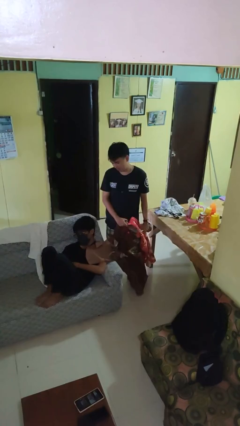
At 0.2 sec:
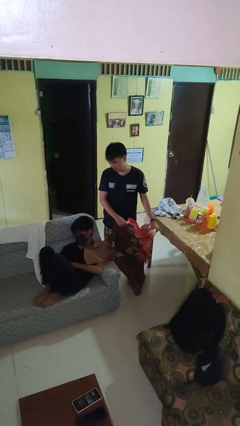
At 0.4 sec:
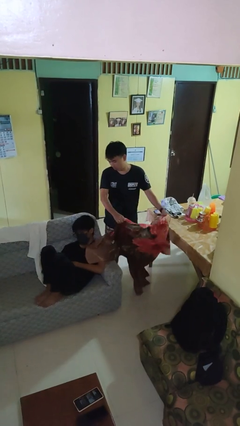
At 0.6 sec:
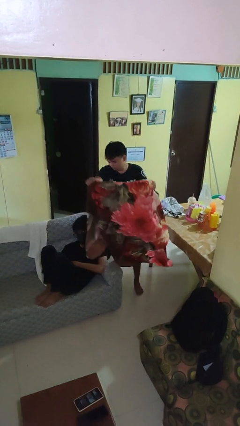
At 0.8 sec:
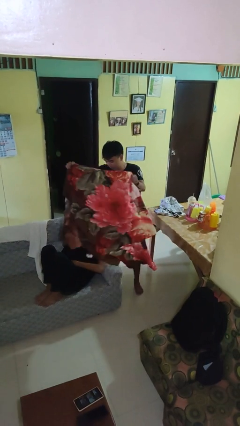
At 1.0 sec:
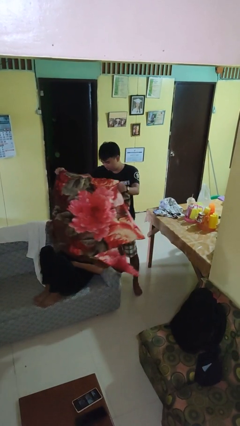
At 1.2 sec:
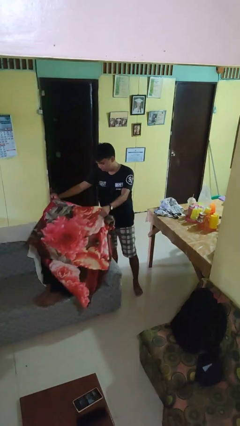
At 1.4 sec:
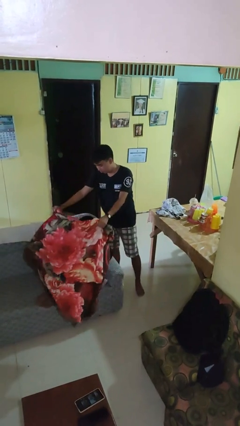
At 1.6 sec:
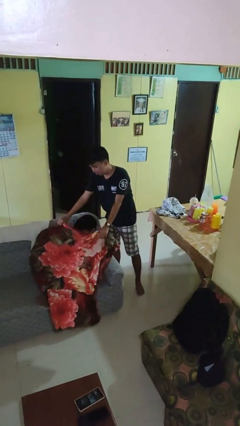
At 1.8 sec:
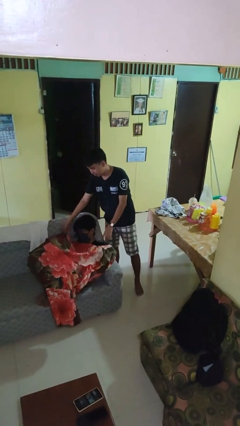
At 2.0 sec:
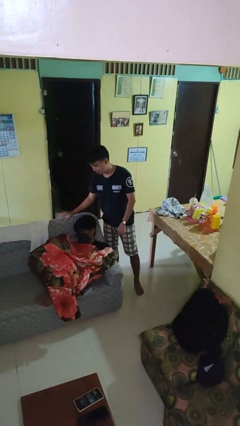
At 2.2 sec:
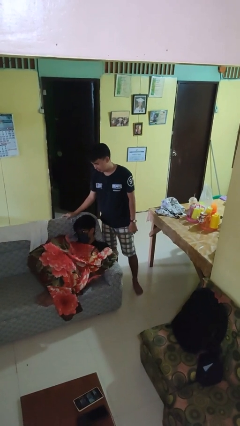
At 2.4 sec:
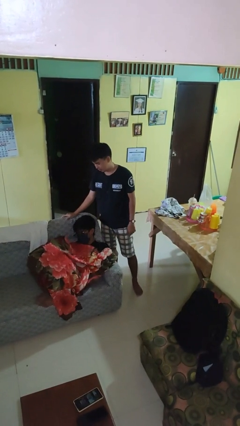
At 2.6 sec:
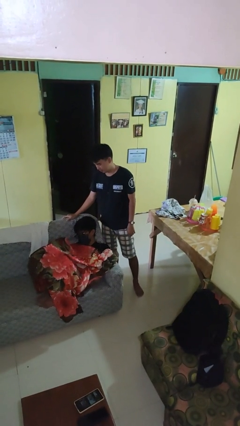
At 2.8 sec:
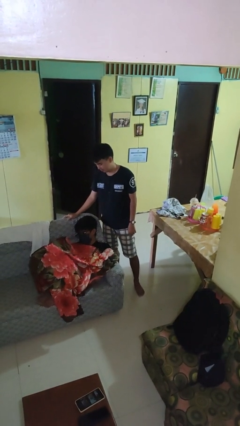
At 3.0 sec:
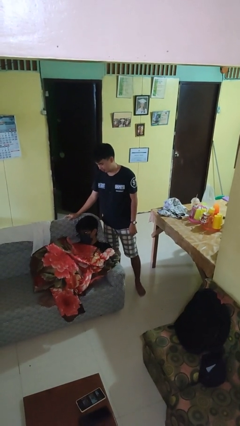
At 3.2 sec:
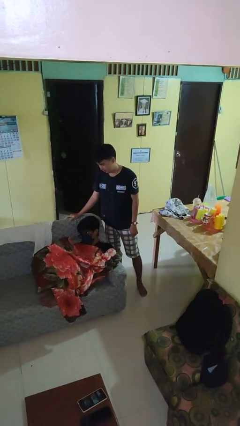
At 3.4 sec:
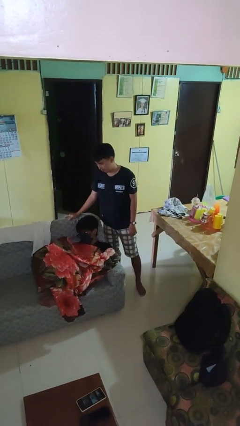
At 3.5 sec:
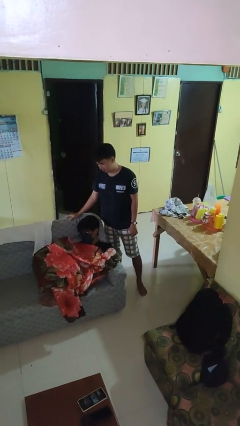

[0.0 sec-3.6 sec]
person covers friend with blanket

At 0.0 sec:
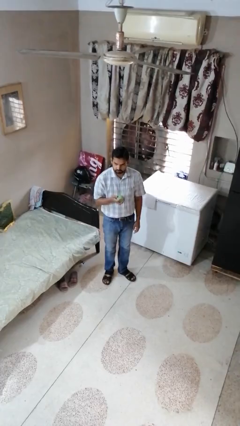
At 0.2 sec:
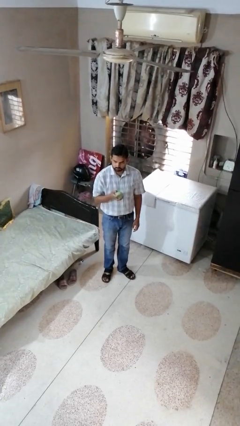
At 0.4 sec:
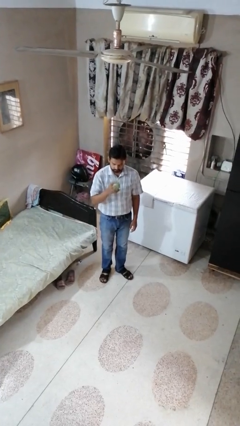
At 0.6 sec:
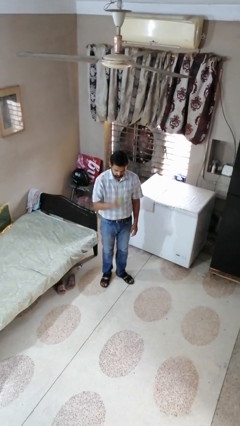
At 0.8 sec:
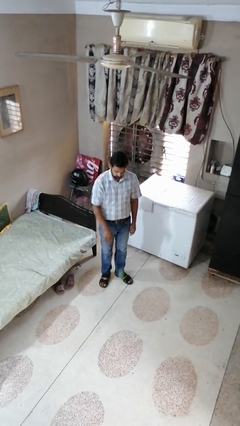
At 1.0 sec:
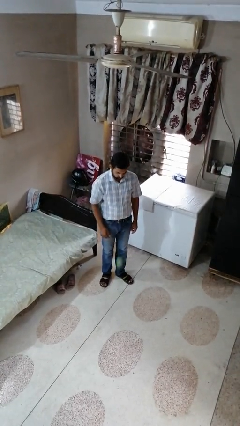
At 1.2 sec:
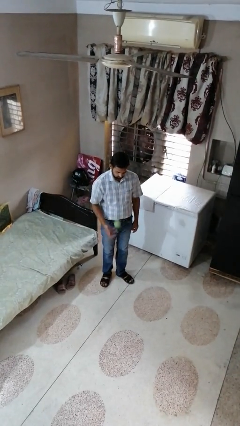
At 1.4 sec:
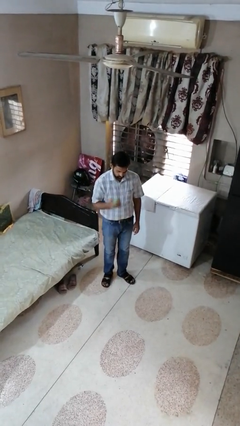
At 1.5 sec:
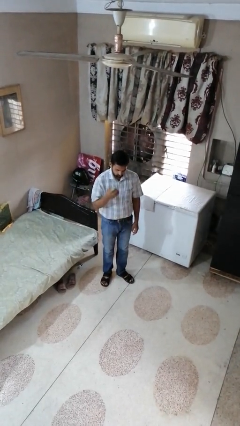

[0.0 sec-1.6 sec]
person bounces ball on floor

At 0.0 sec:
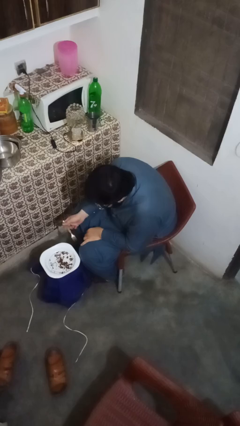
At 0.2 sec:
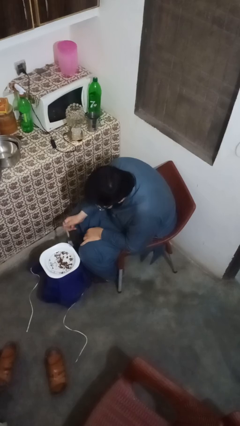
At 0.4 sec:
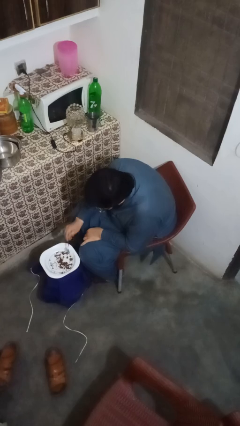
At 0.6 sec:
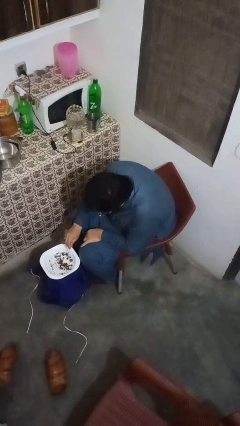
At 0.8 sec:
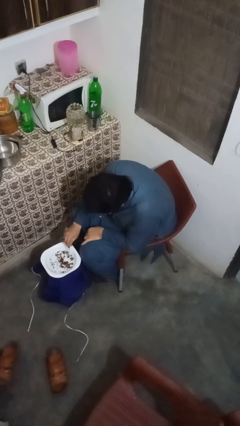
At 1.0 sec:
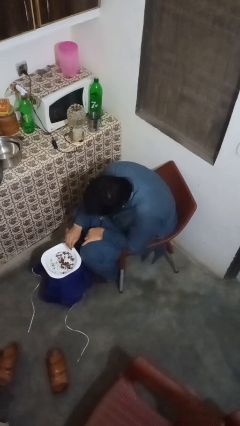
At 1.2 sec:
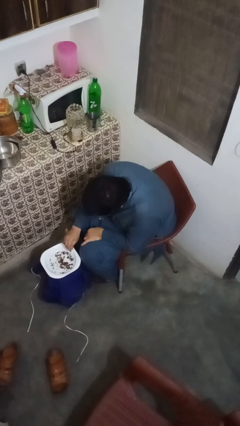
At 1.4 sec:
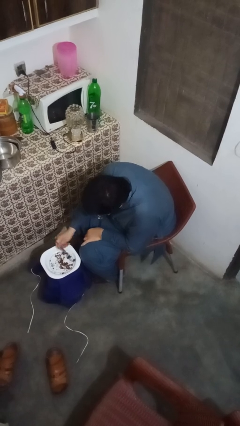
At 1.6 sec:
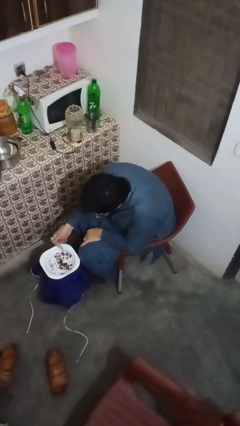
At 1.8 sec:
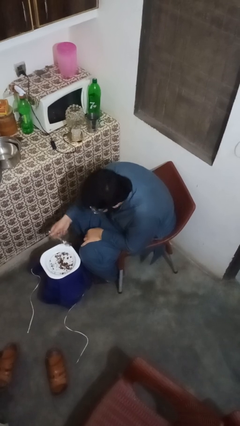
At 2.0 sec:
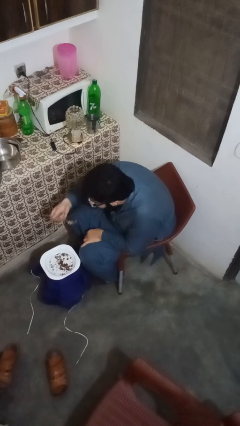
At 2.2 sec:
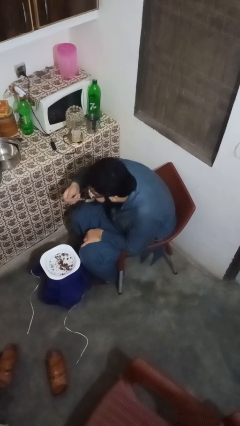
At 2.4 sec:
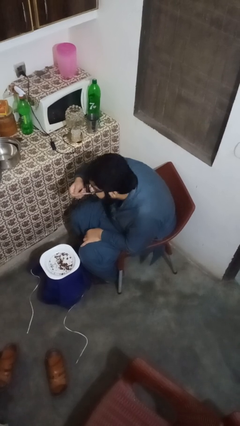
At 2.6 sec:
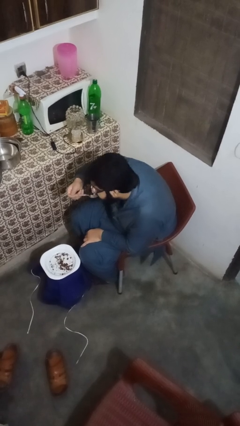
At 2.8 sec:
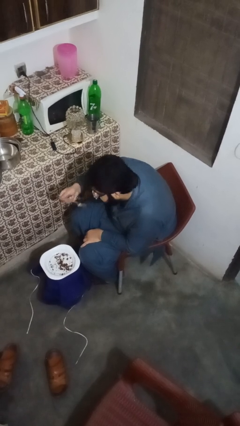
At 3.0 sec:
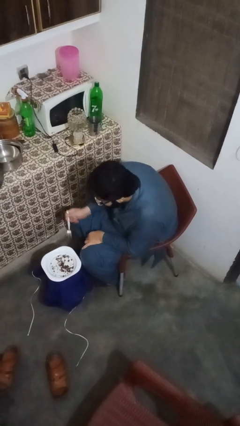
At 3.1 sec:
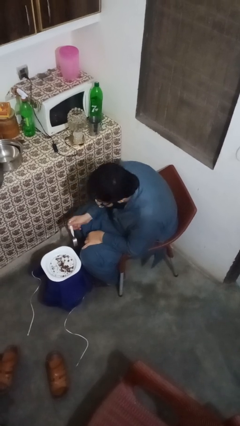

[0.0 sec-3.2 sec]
person eats with utensil

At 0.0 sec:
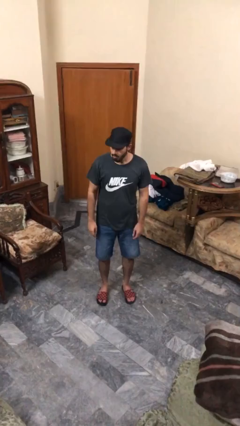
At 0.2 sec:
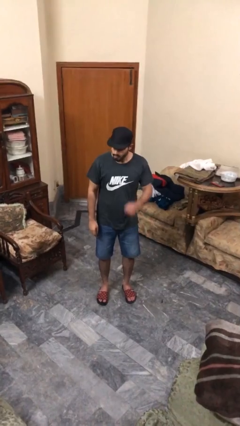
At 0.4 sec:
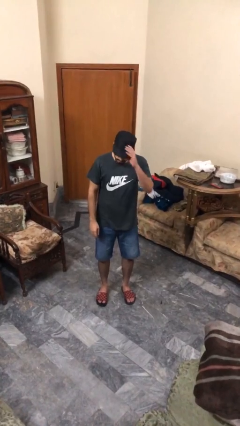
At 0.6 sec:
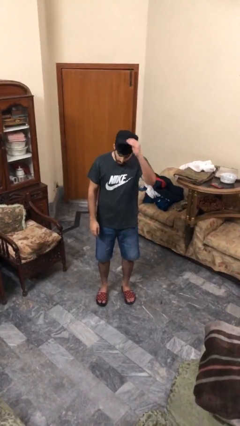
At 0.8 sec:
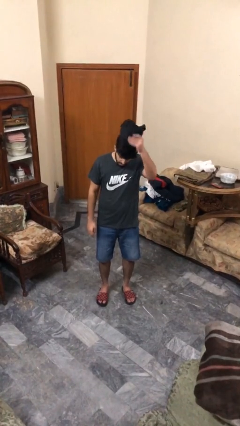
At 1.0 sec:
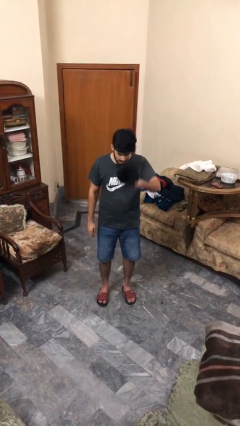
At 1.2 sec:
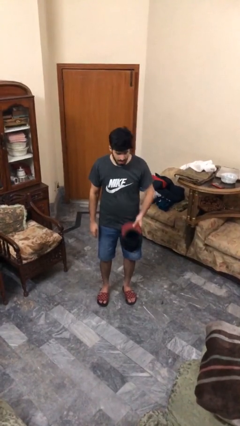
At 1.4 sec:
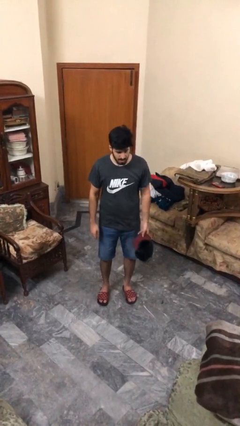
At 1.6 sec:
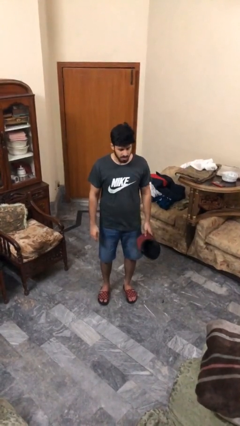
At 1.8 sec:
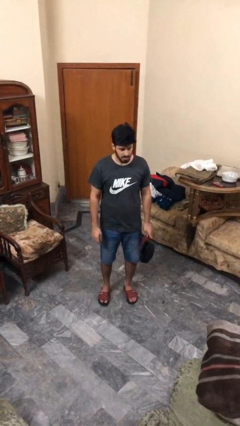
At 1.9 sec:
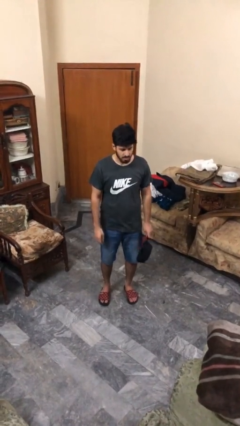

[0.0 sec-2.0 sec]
person takes off hat

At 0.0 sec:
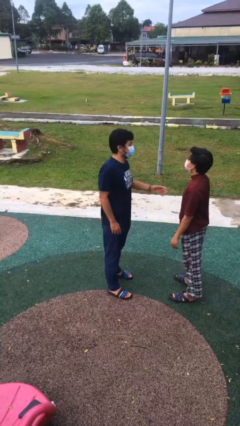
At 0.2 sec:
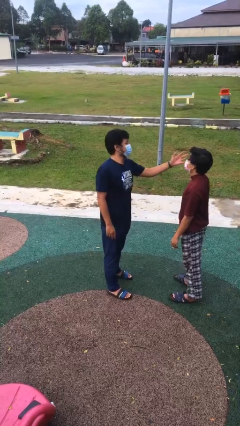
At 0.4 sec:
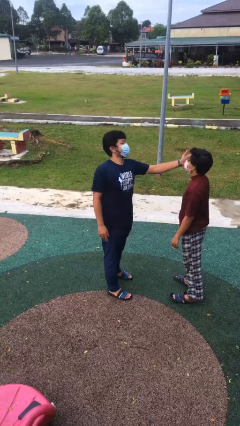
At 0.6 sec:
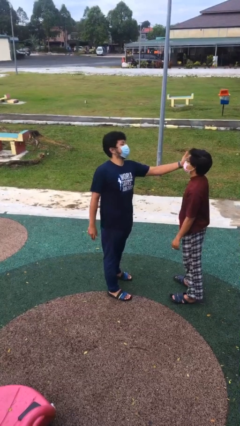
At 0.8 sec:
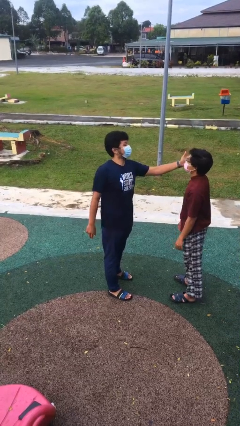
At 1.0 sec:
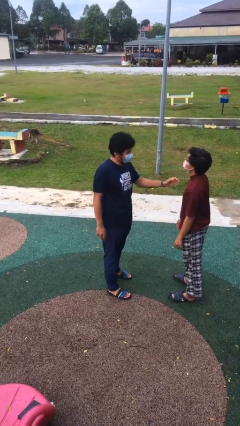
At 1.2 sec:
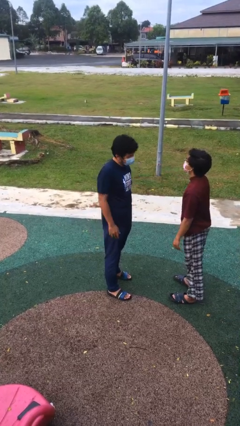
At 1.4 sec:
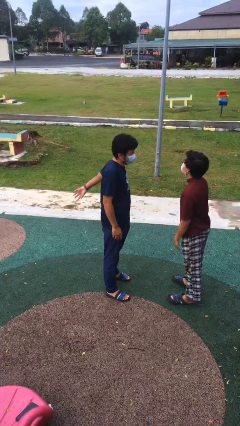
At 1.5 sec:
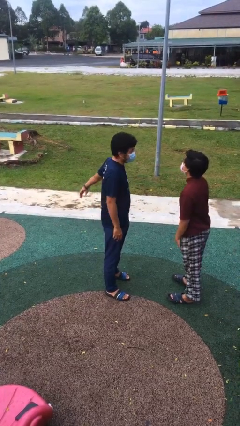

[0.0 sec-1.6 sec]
person touches face of person

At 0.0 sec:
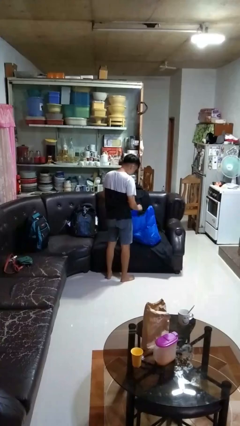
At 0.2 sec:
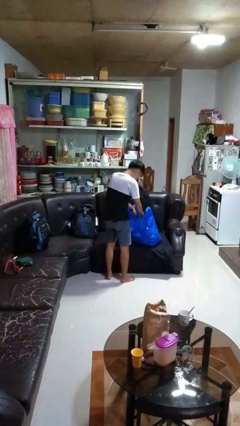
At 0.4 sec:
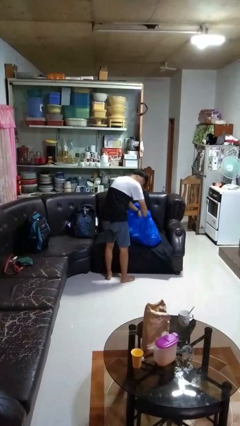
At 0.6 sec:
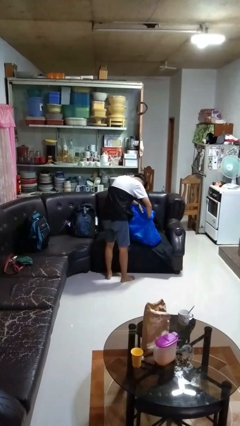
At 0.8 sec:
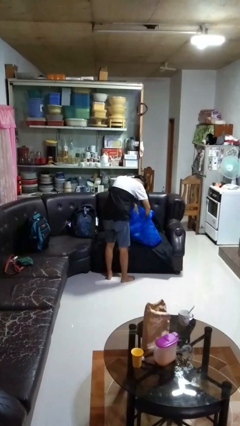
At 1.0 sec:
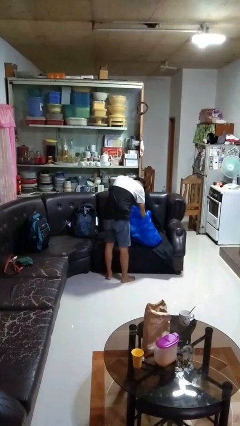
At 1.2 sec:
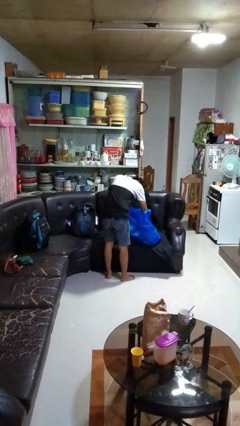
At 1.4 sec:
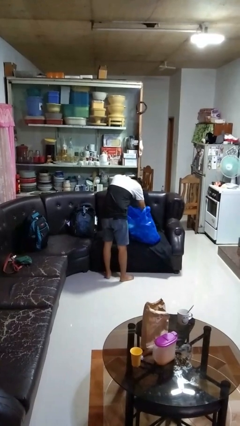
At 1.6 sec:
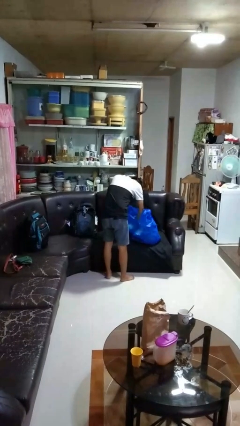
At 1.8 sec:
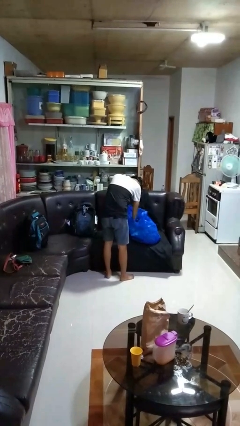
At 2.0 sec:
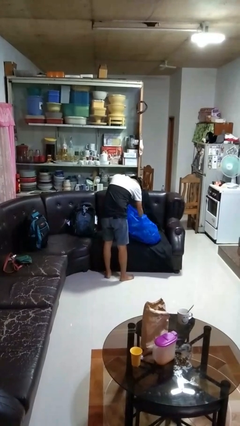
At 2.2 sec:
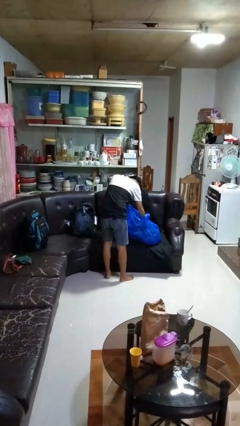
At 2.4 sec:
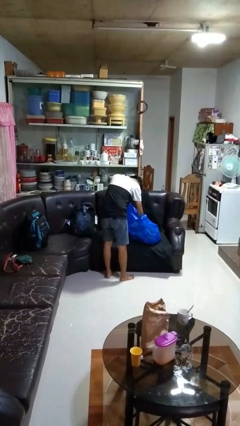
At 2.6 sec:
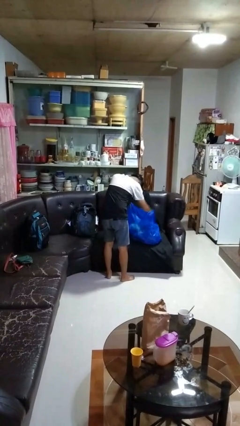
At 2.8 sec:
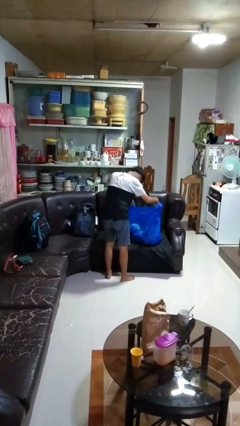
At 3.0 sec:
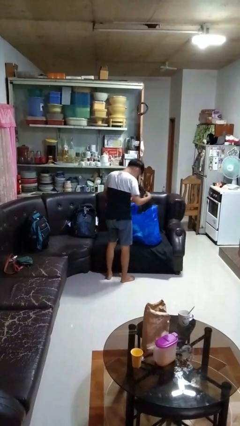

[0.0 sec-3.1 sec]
person searches in bag

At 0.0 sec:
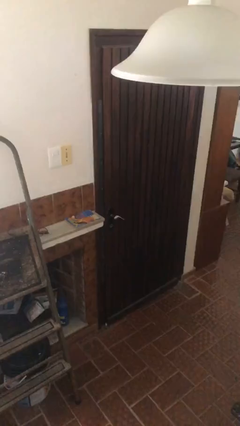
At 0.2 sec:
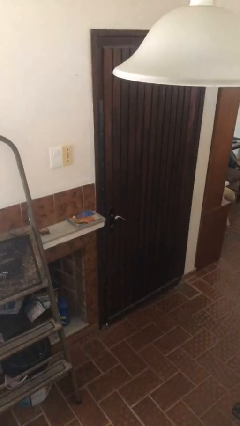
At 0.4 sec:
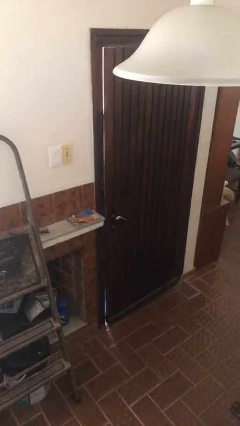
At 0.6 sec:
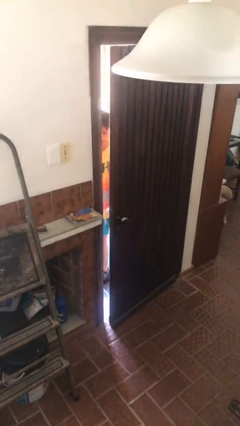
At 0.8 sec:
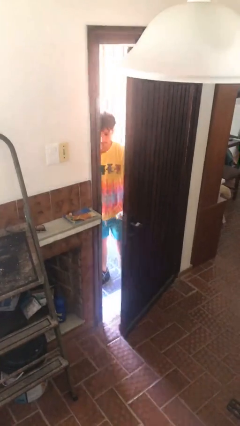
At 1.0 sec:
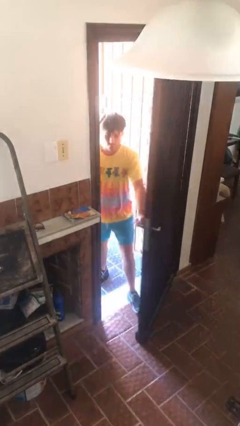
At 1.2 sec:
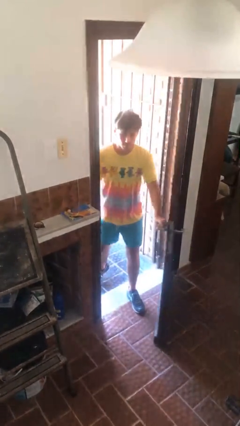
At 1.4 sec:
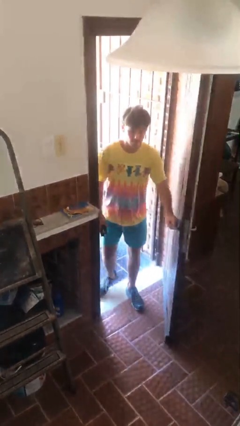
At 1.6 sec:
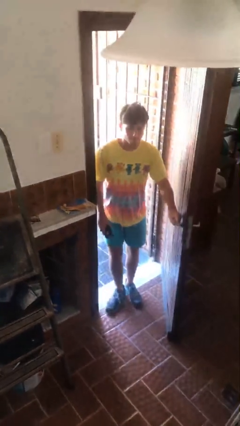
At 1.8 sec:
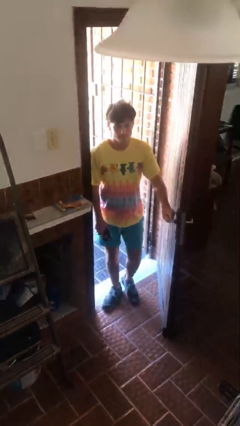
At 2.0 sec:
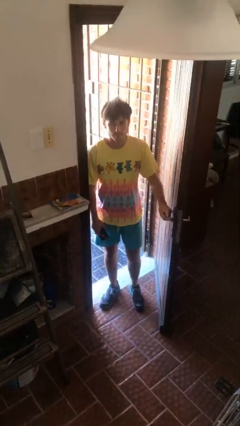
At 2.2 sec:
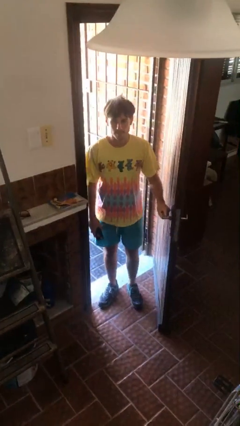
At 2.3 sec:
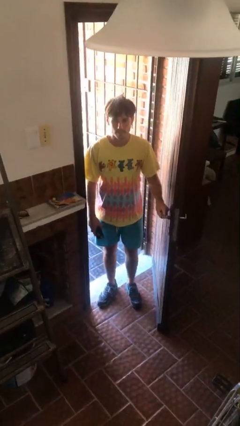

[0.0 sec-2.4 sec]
person opens facility door
